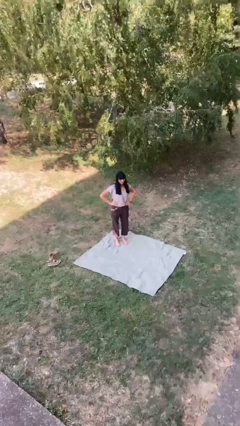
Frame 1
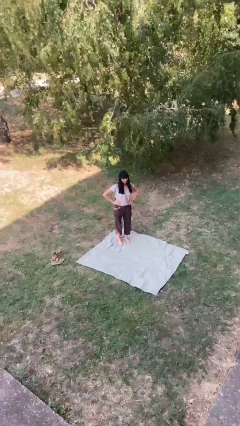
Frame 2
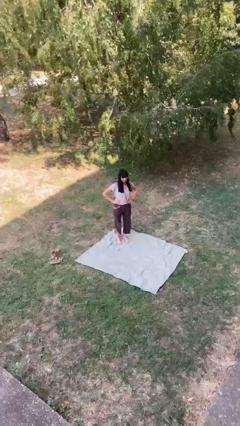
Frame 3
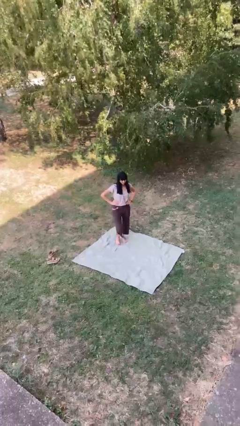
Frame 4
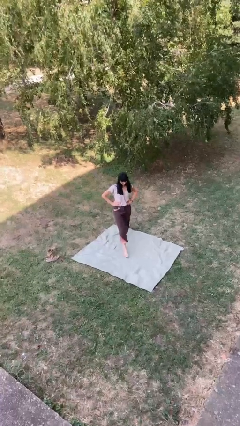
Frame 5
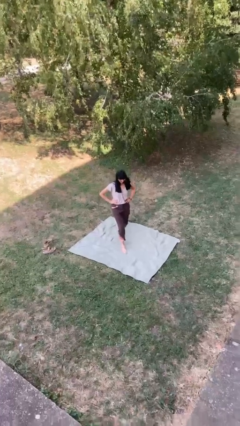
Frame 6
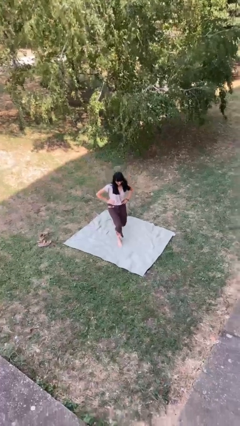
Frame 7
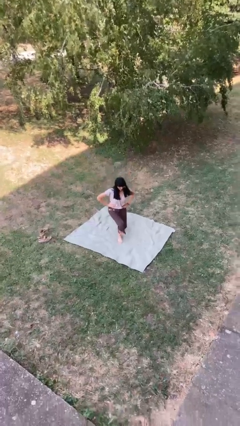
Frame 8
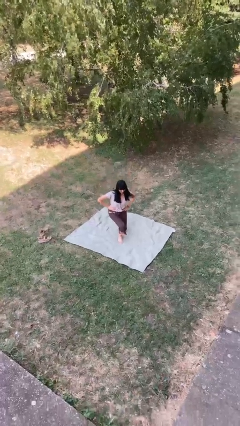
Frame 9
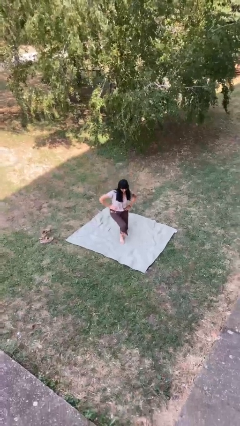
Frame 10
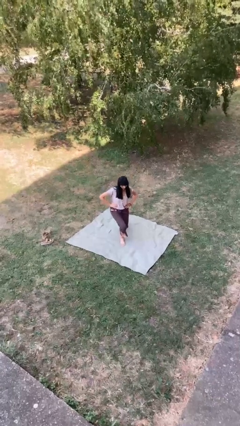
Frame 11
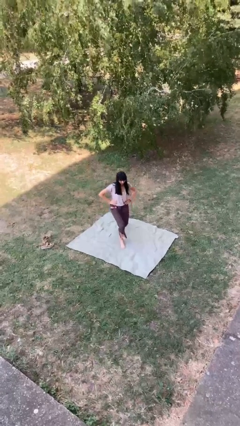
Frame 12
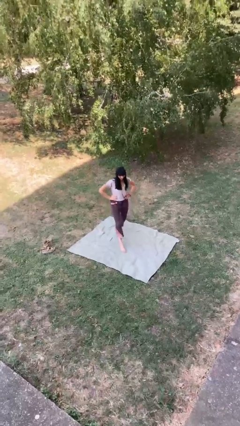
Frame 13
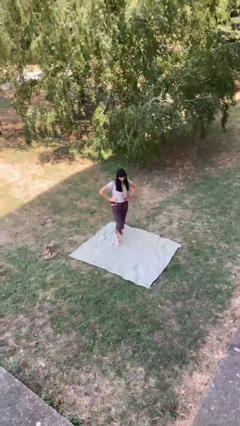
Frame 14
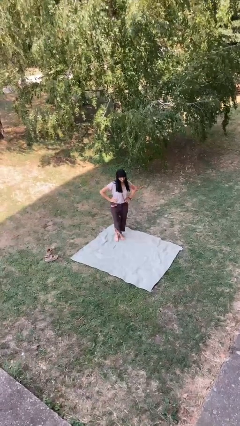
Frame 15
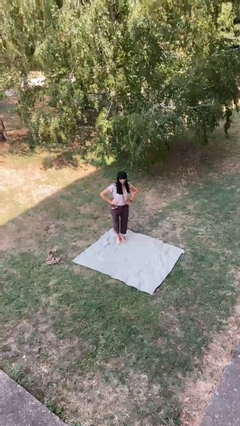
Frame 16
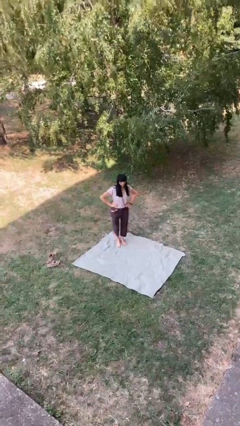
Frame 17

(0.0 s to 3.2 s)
person exercises with lunges

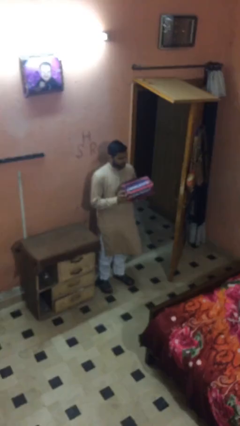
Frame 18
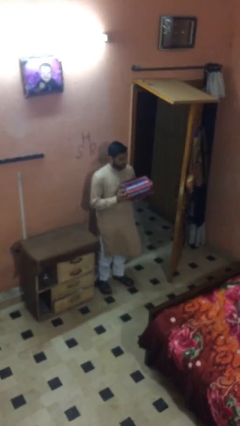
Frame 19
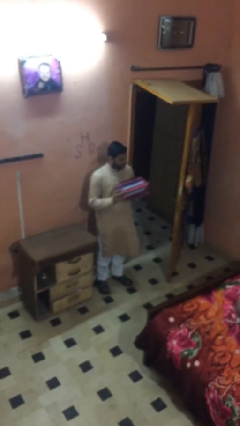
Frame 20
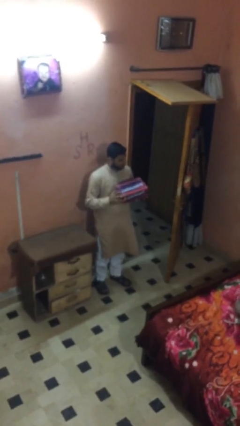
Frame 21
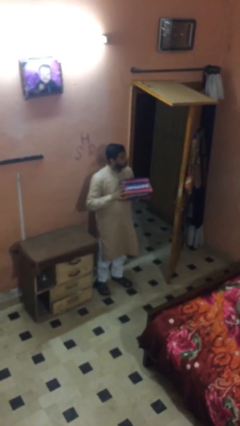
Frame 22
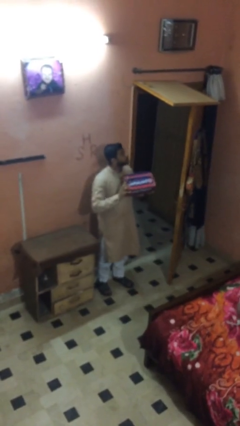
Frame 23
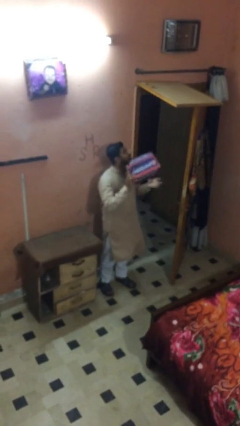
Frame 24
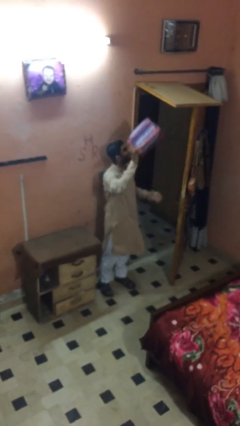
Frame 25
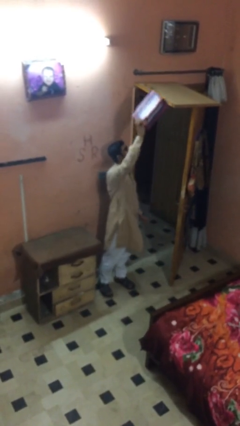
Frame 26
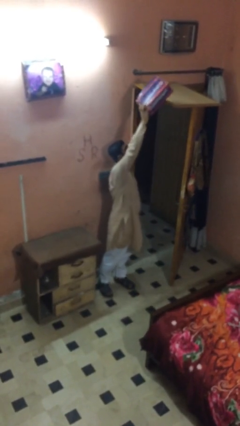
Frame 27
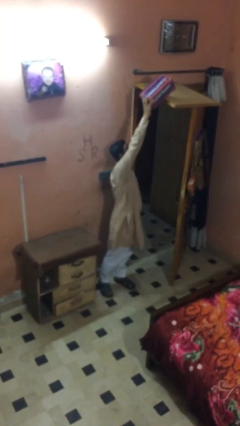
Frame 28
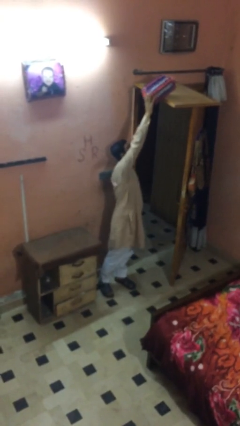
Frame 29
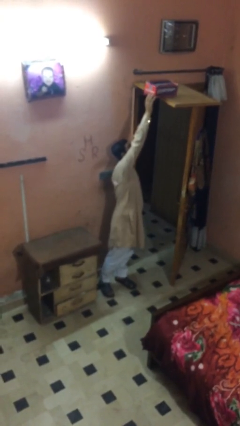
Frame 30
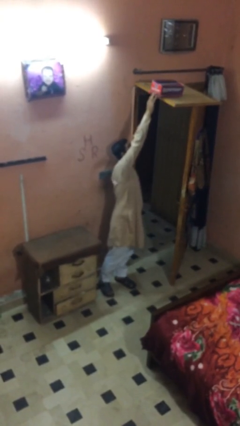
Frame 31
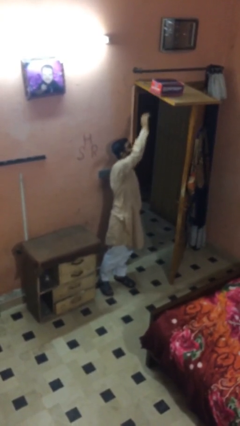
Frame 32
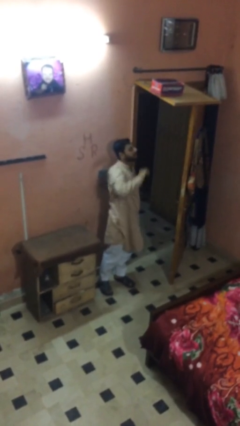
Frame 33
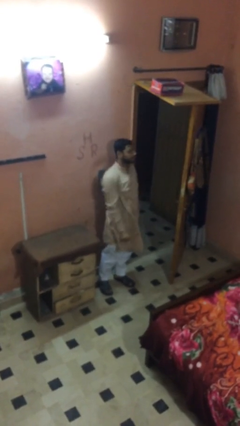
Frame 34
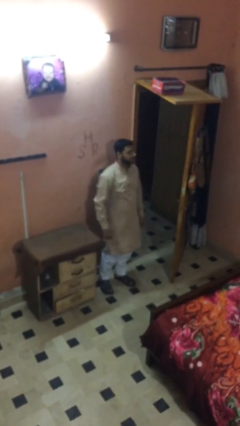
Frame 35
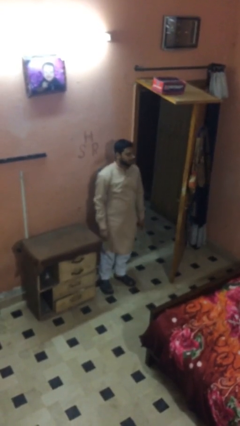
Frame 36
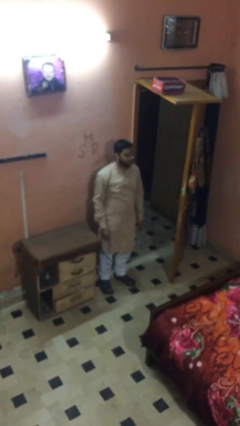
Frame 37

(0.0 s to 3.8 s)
person puts down object on shelf

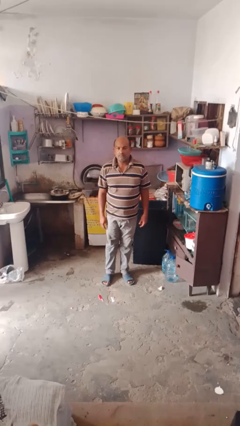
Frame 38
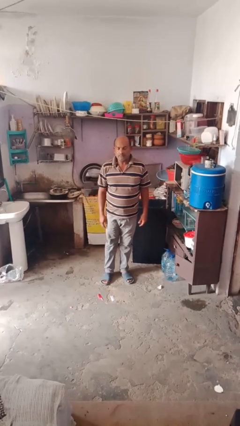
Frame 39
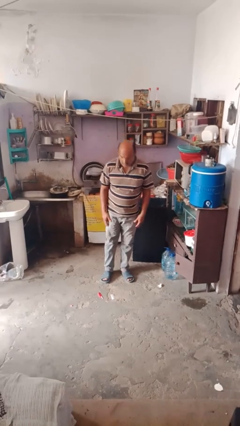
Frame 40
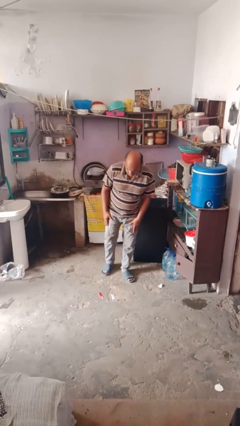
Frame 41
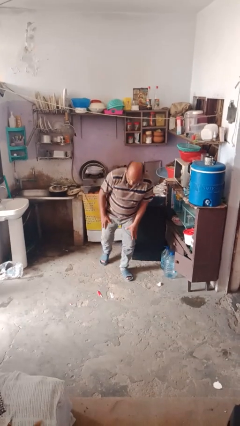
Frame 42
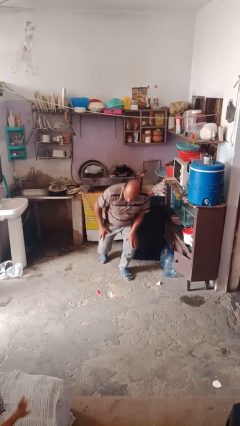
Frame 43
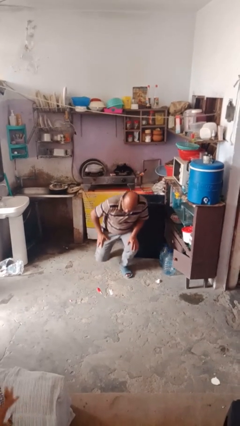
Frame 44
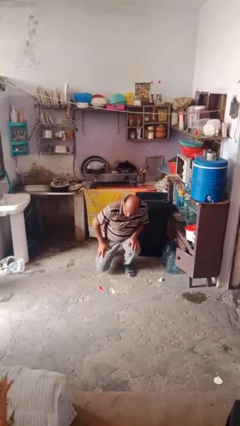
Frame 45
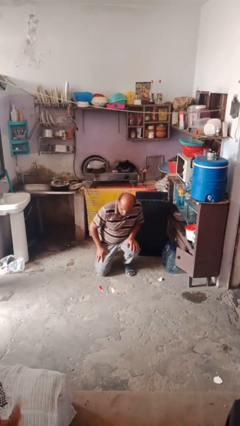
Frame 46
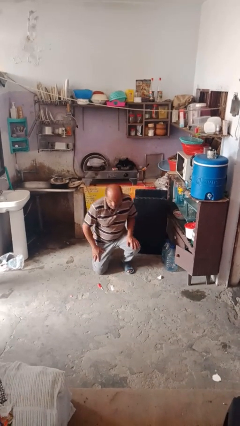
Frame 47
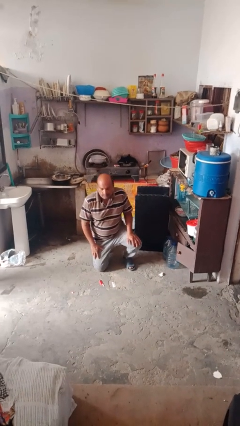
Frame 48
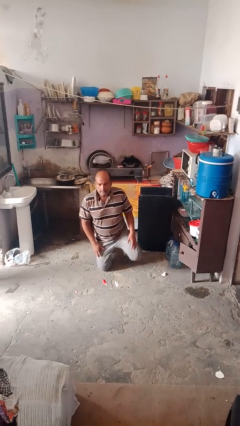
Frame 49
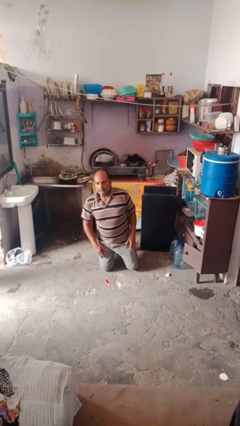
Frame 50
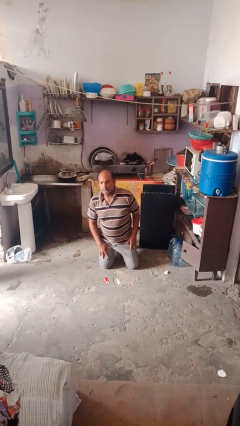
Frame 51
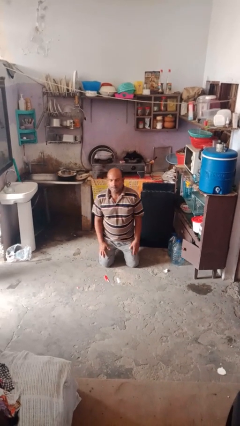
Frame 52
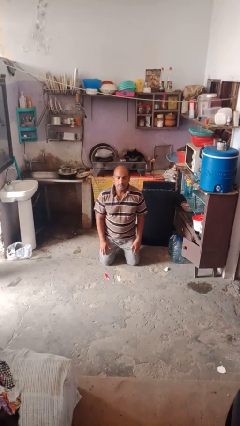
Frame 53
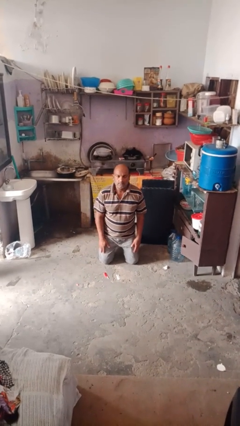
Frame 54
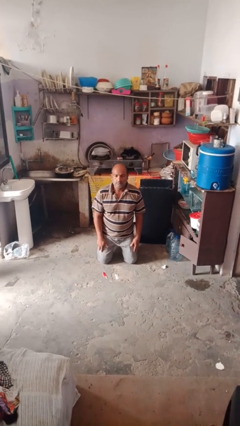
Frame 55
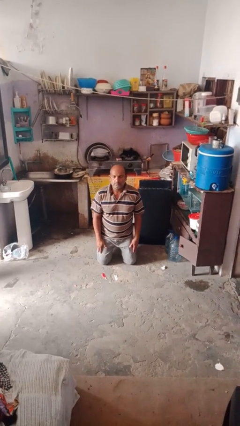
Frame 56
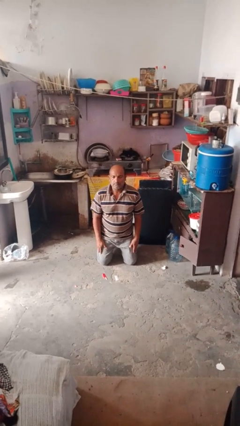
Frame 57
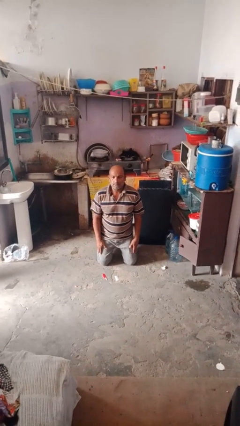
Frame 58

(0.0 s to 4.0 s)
person kneels

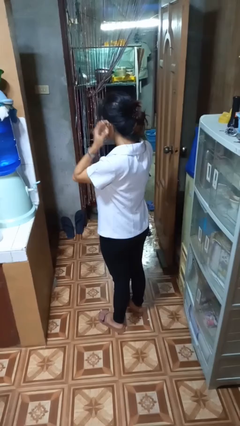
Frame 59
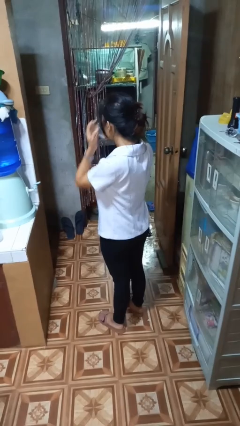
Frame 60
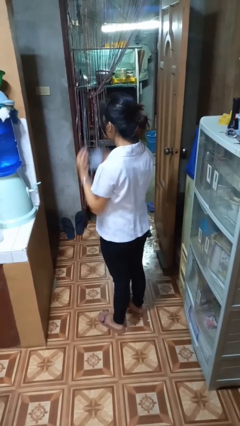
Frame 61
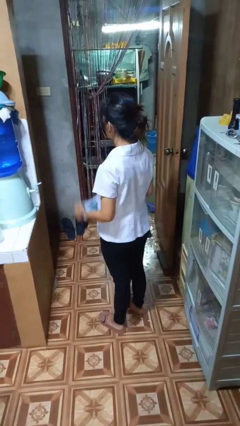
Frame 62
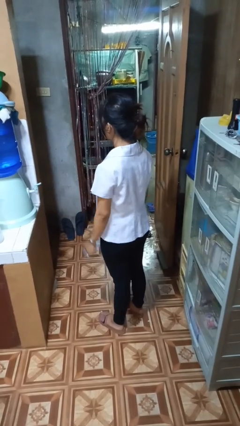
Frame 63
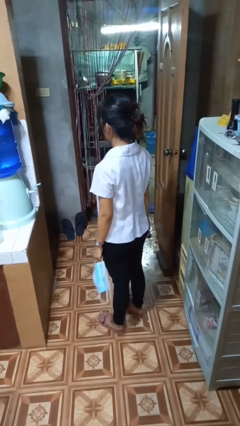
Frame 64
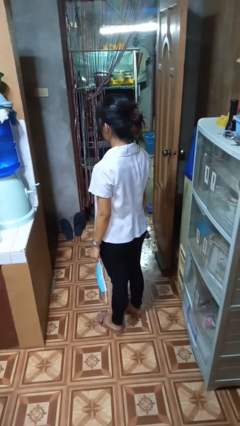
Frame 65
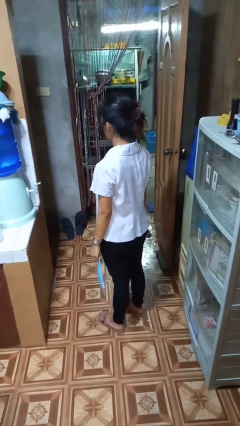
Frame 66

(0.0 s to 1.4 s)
person takes off facemask

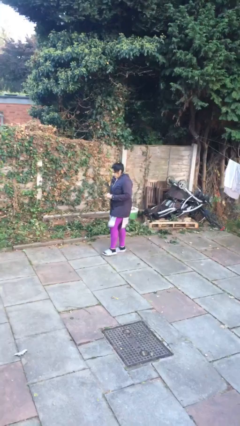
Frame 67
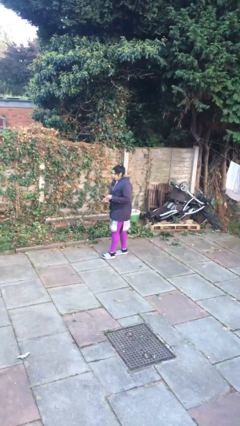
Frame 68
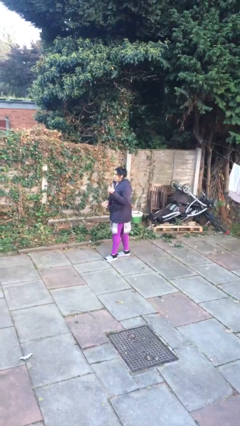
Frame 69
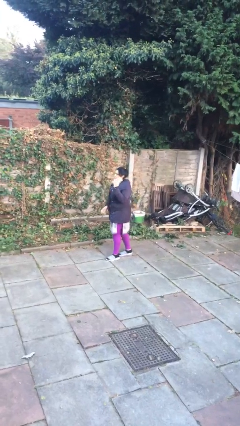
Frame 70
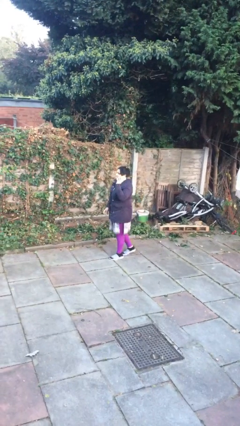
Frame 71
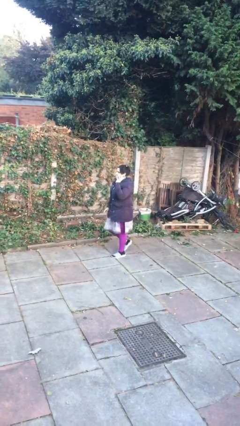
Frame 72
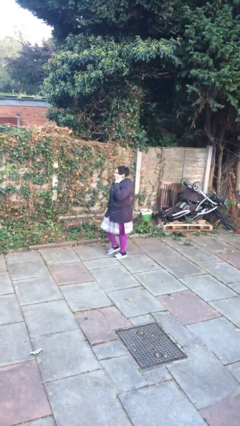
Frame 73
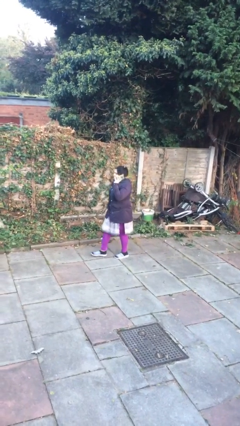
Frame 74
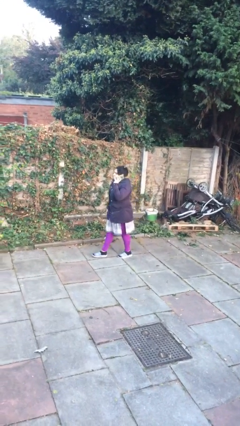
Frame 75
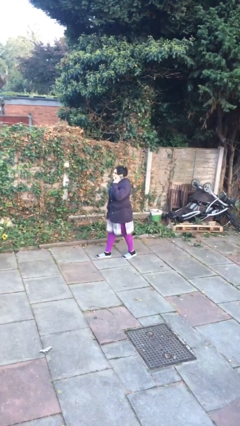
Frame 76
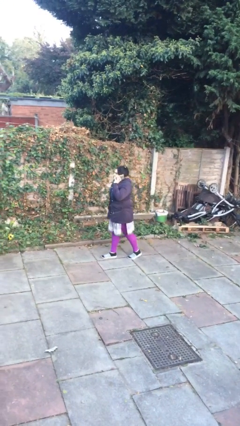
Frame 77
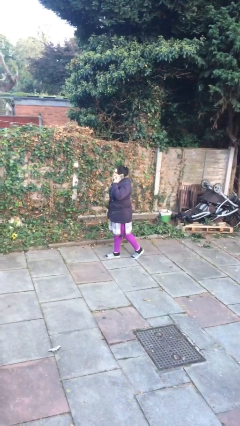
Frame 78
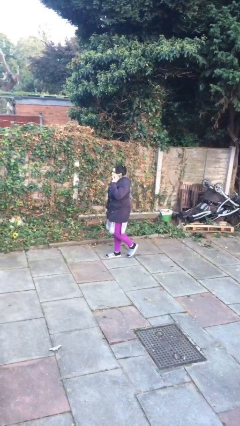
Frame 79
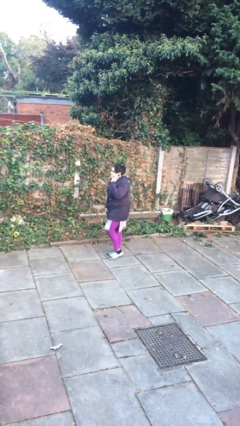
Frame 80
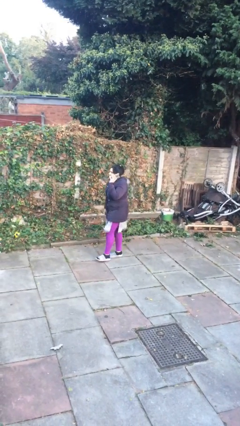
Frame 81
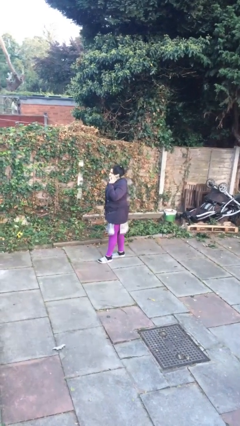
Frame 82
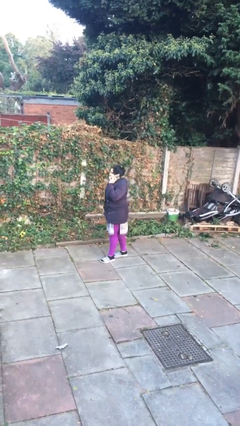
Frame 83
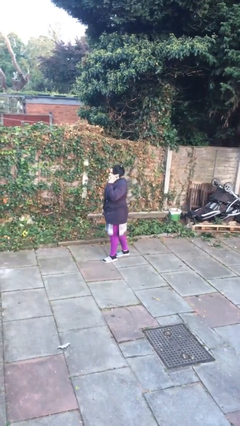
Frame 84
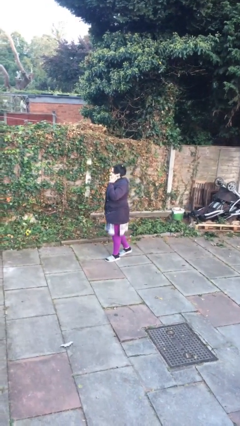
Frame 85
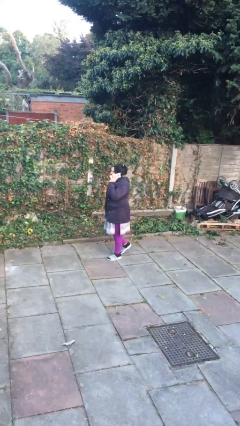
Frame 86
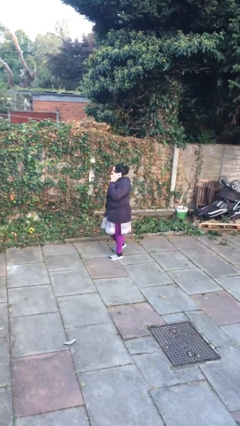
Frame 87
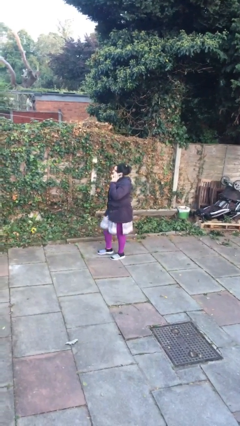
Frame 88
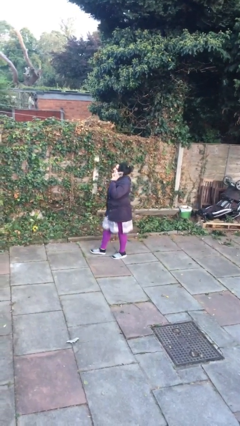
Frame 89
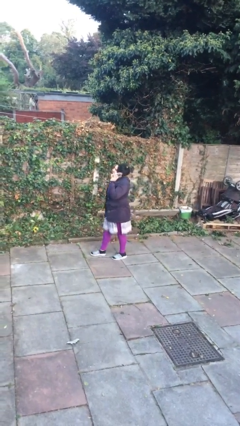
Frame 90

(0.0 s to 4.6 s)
person talks on phone

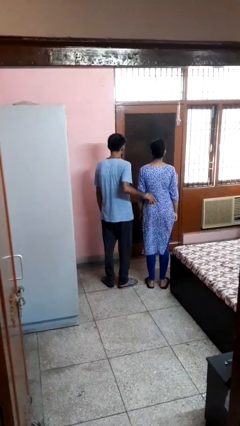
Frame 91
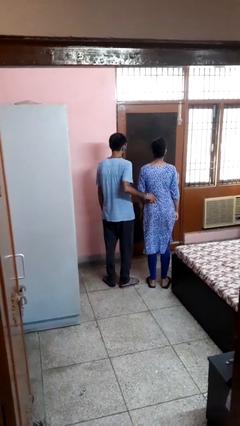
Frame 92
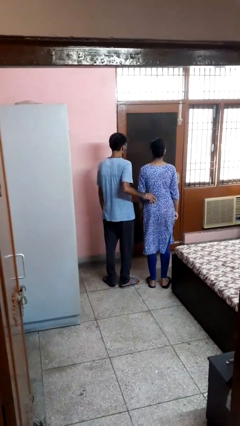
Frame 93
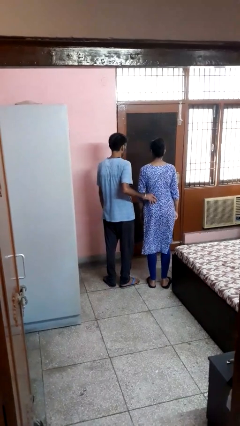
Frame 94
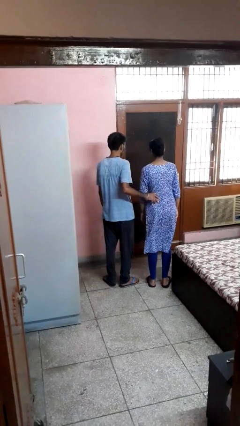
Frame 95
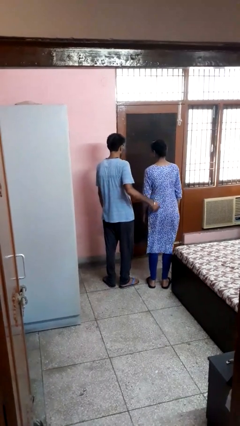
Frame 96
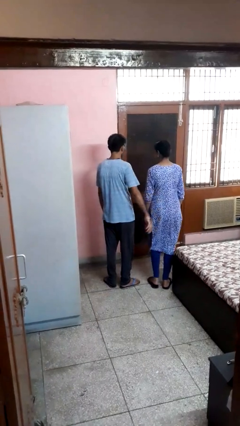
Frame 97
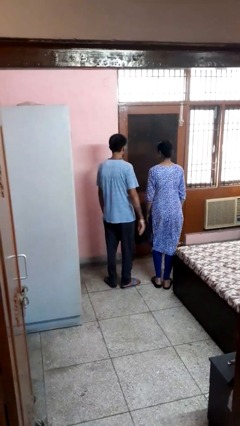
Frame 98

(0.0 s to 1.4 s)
person tickles person
